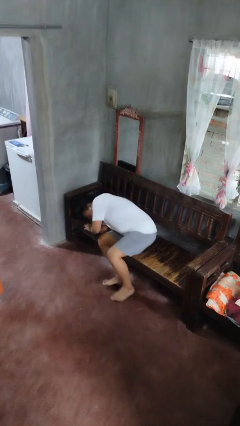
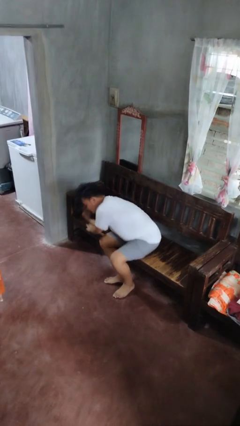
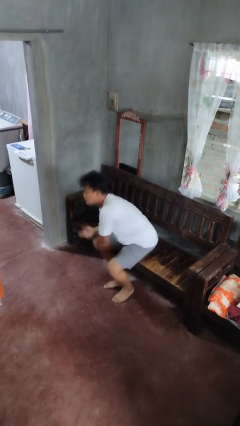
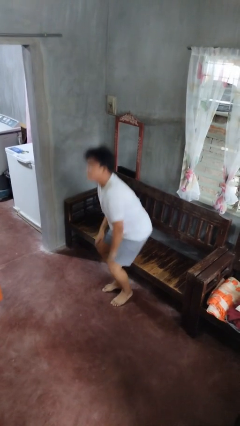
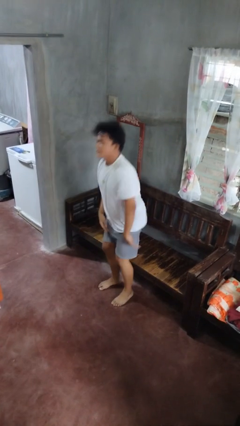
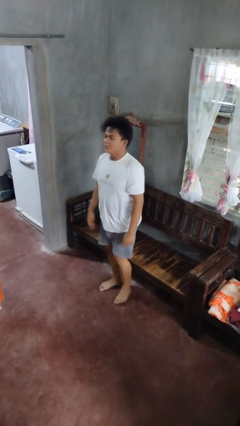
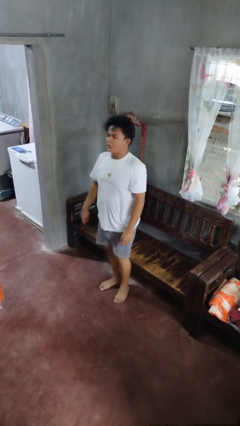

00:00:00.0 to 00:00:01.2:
person stands up

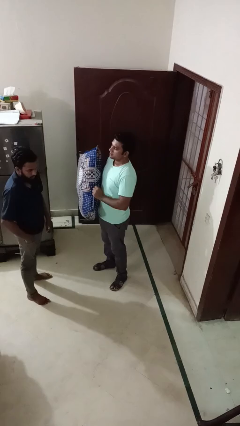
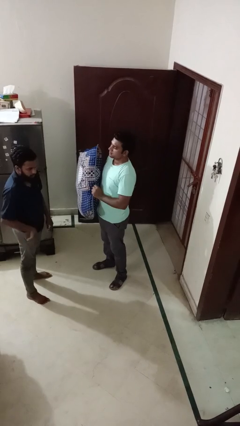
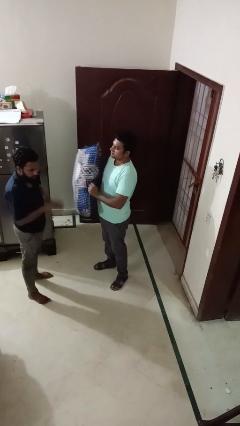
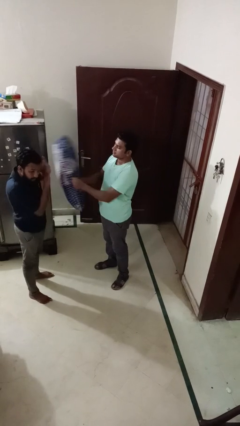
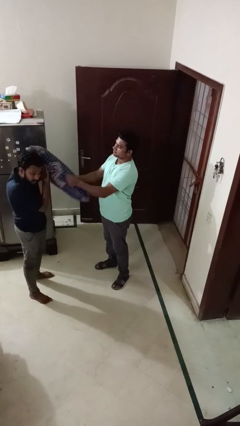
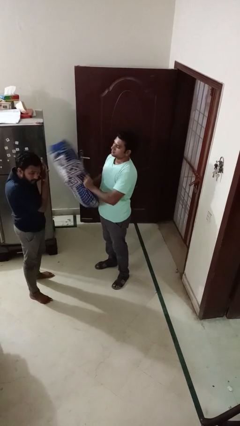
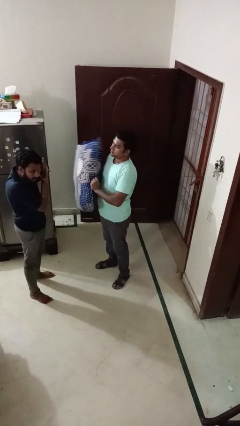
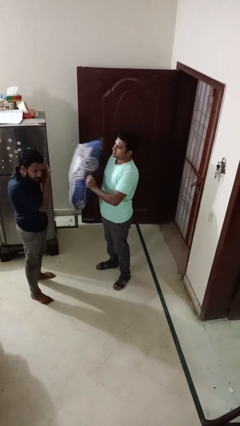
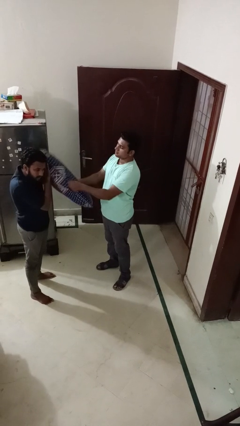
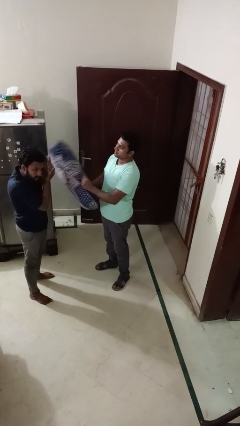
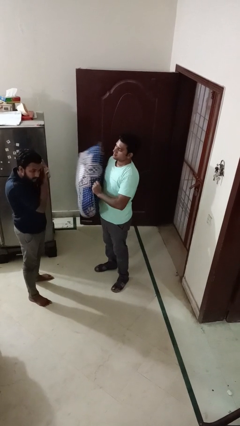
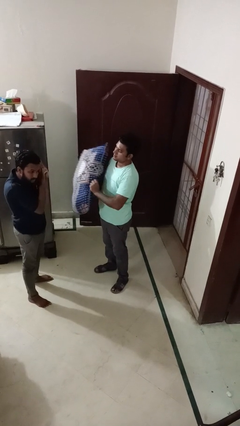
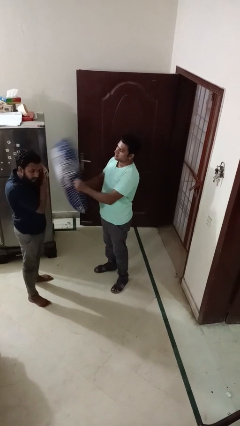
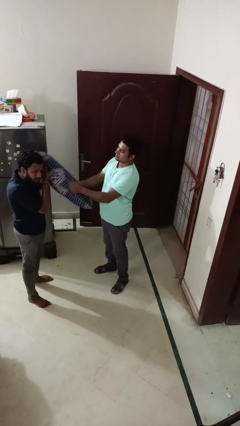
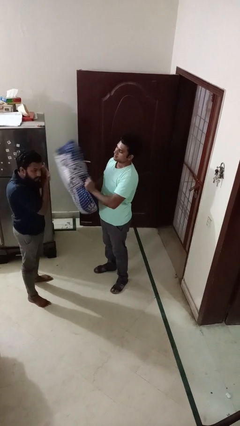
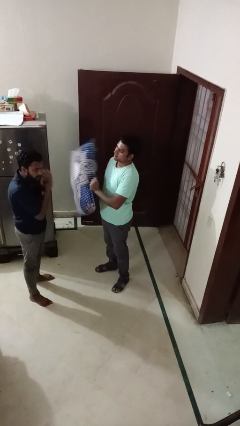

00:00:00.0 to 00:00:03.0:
person hits person with pillow

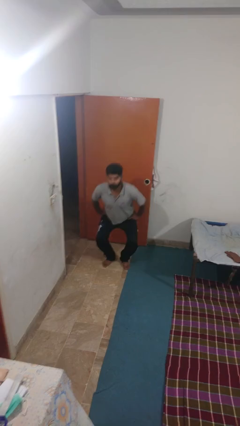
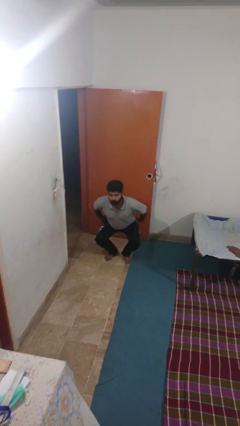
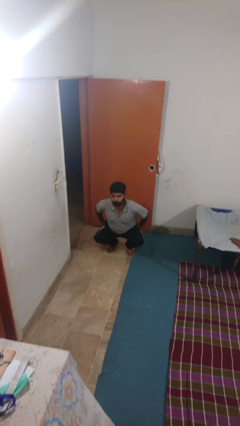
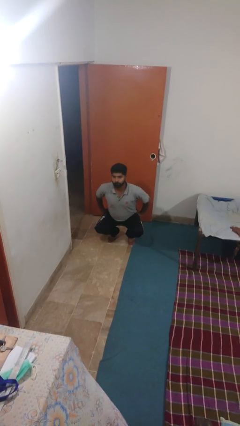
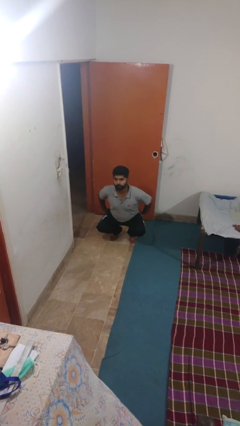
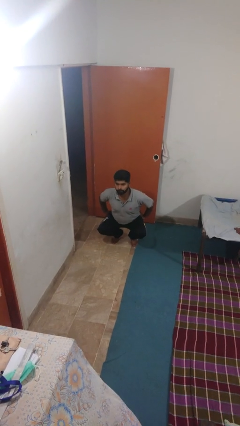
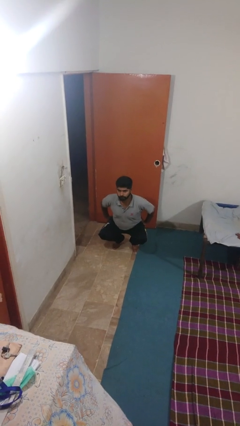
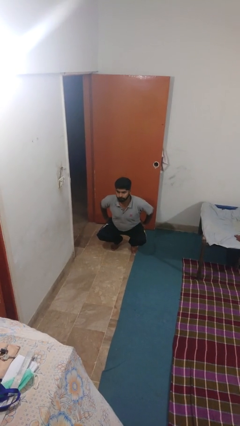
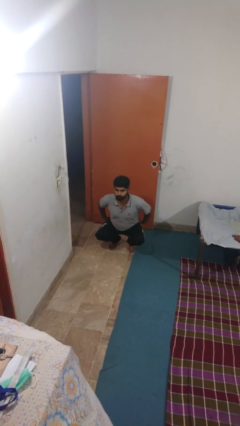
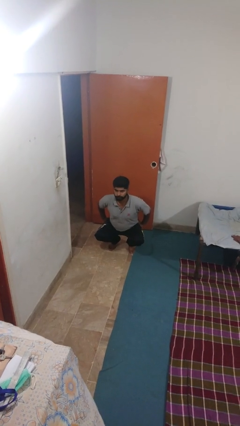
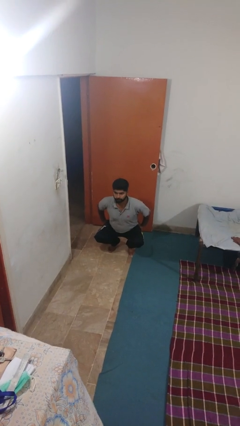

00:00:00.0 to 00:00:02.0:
person squats

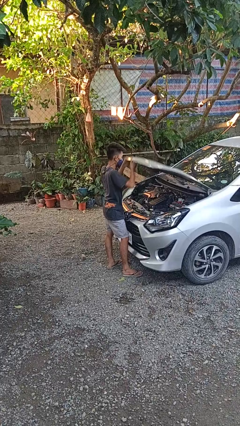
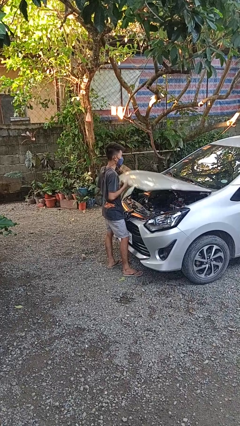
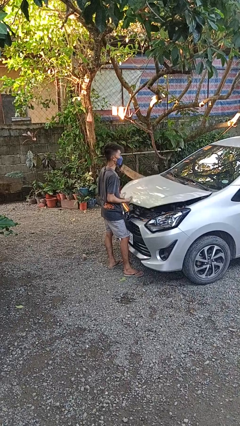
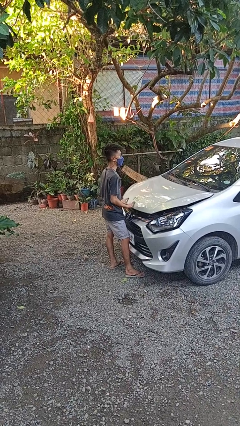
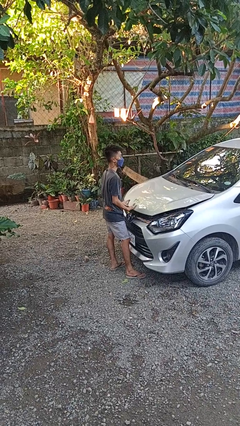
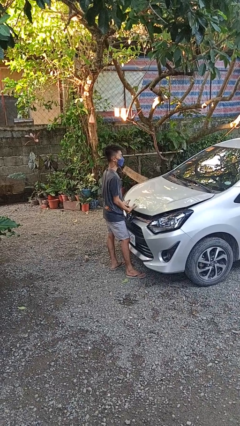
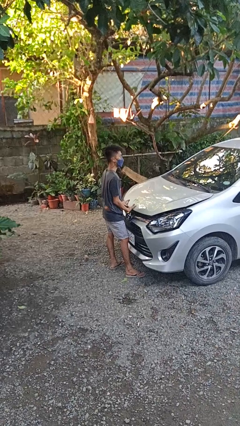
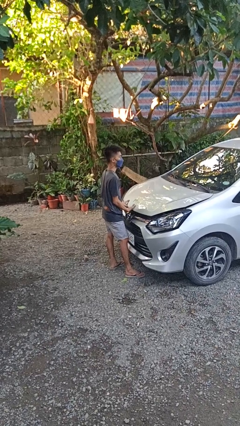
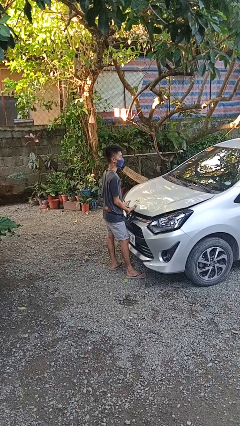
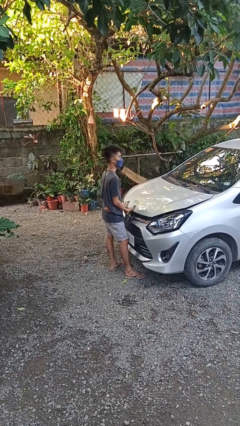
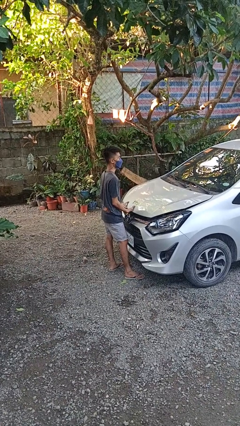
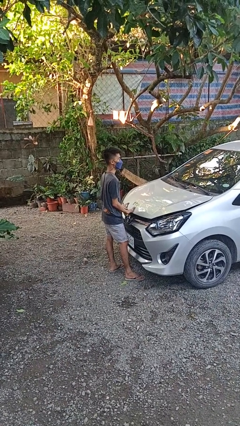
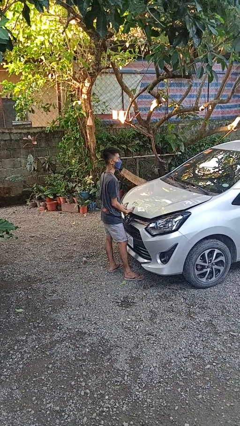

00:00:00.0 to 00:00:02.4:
person closes car hood

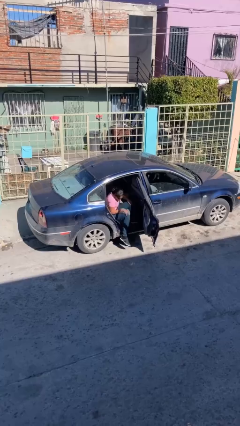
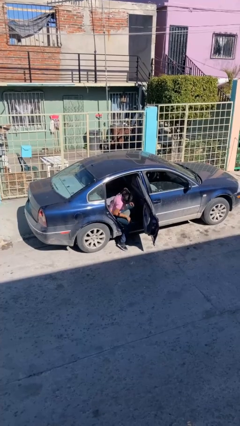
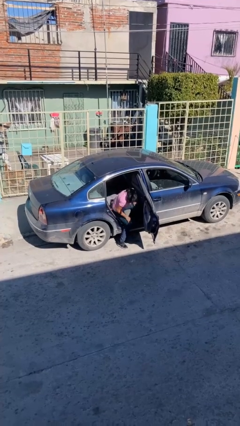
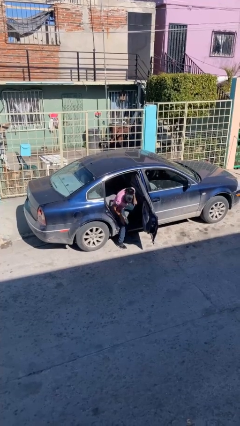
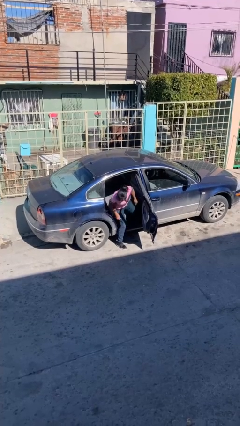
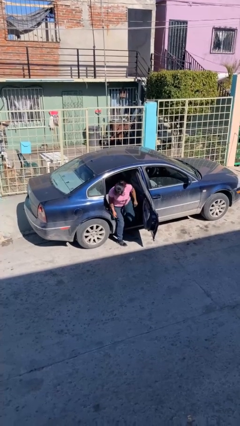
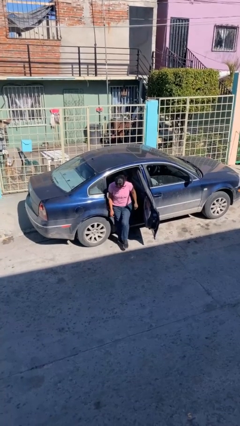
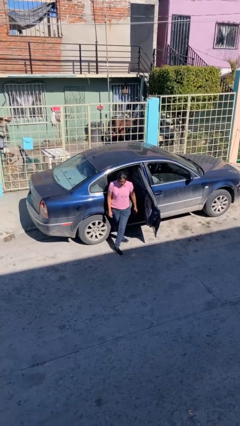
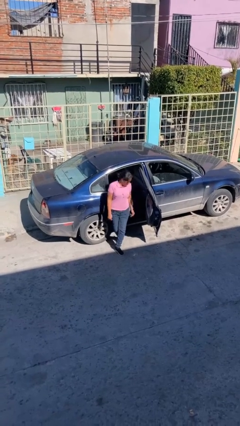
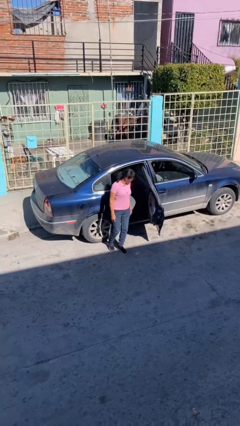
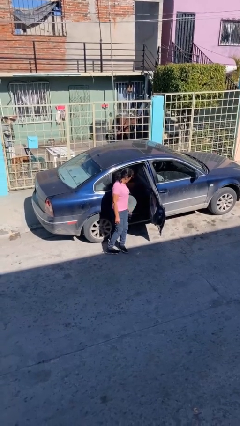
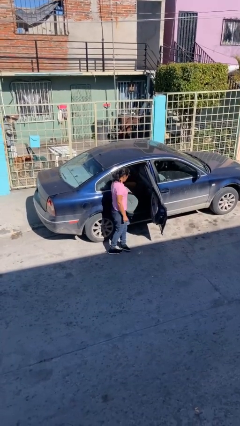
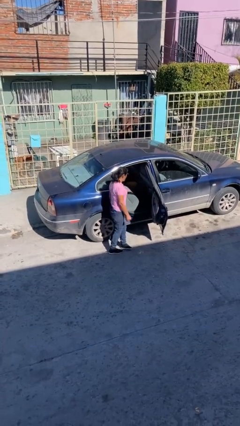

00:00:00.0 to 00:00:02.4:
person exits car

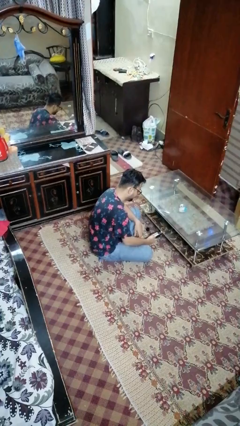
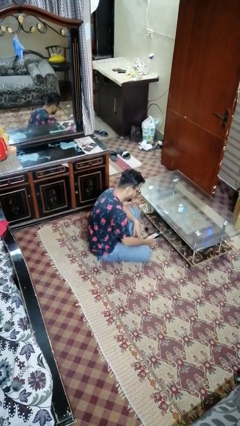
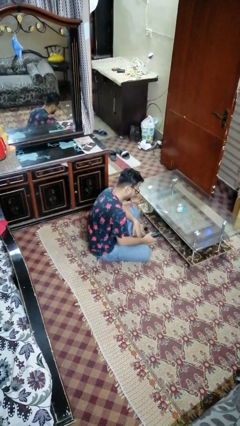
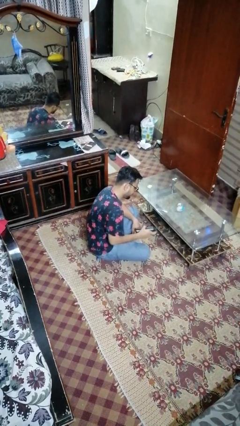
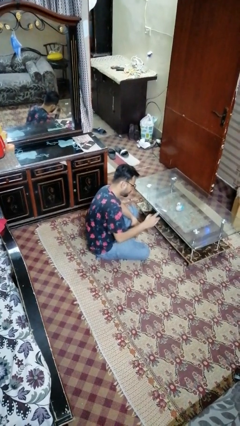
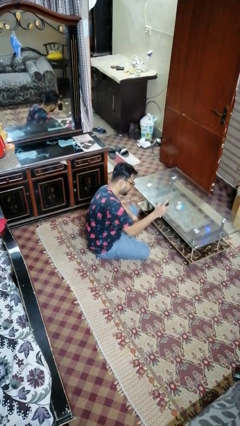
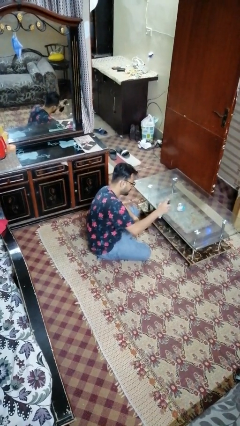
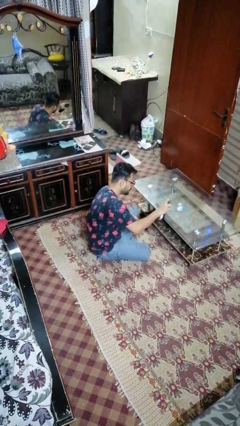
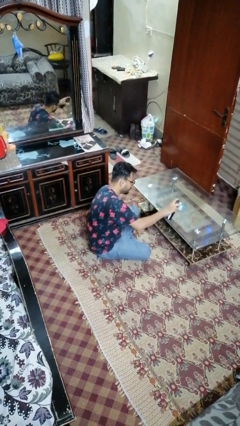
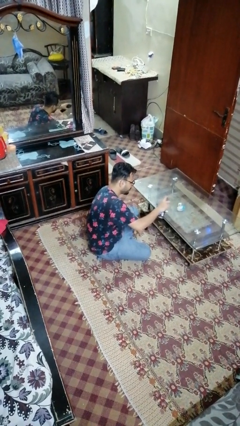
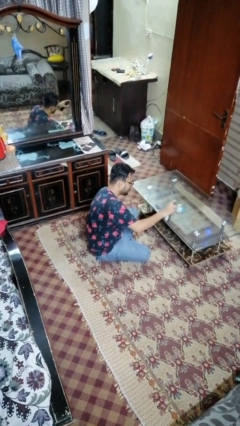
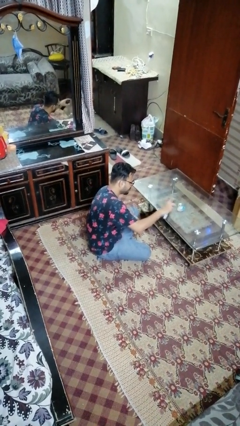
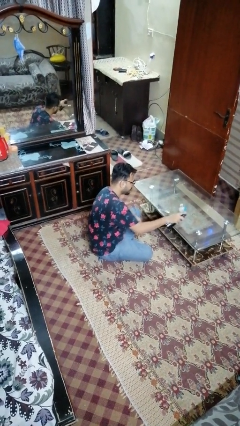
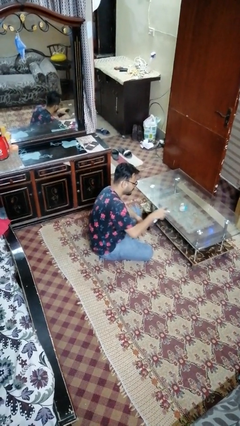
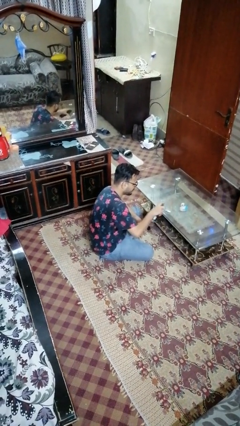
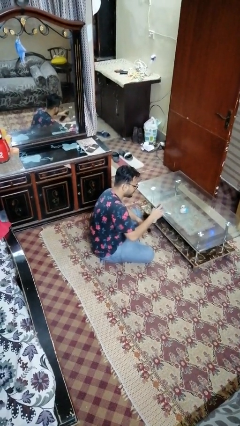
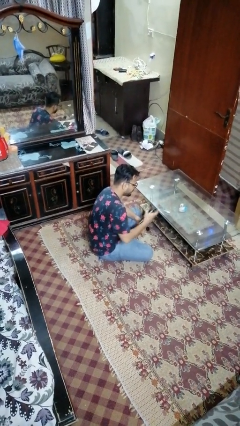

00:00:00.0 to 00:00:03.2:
person sprays from bottle

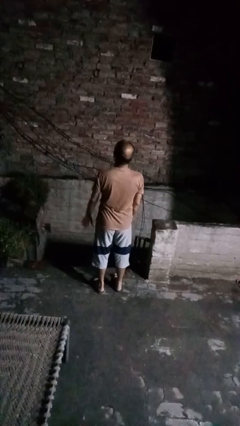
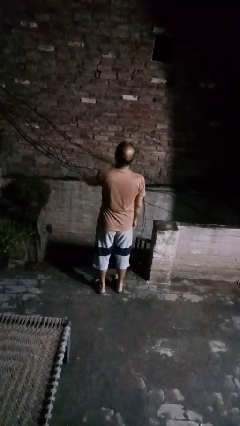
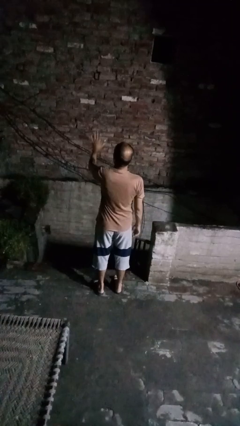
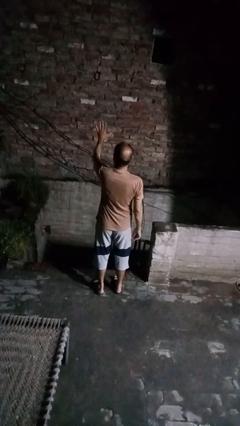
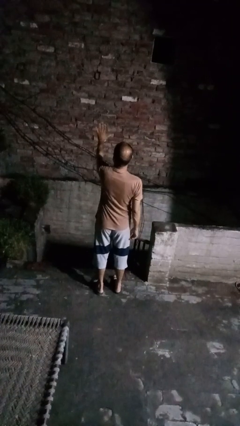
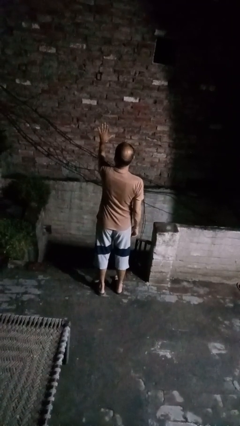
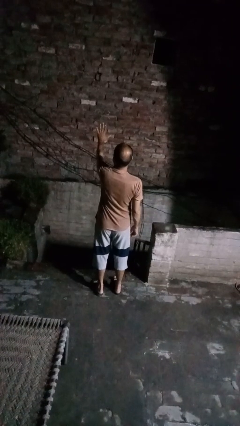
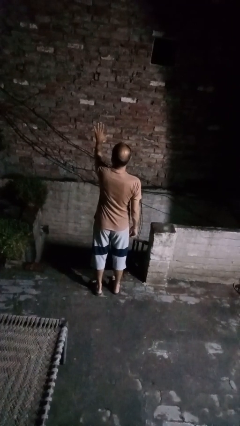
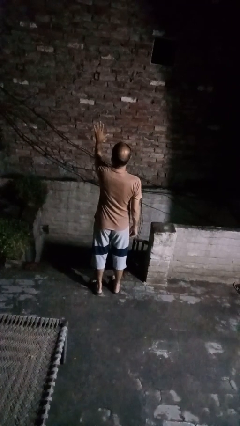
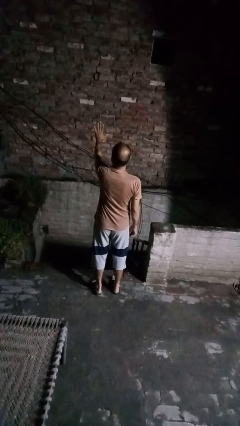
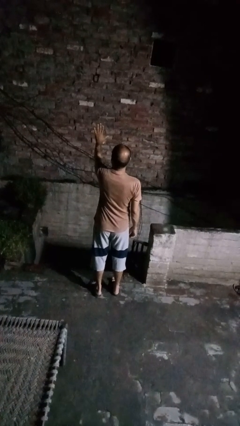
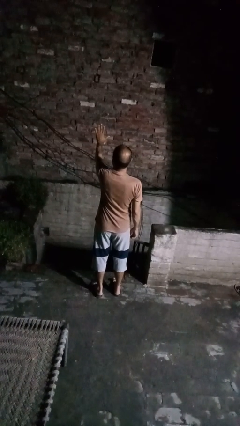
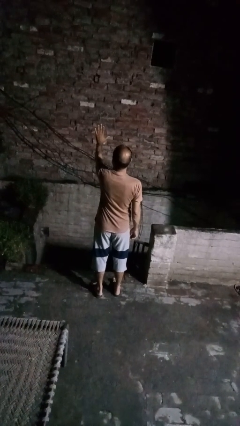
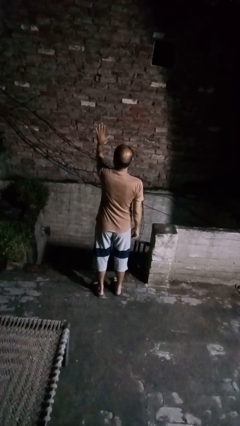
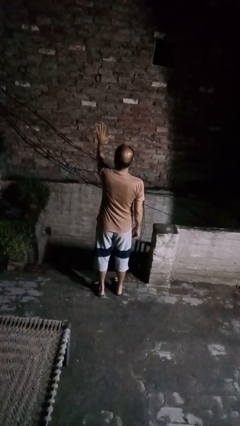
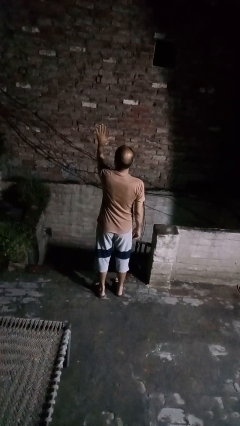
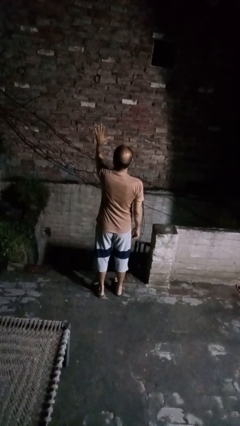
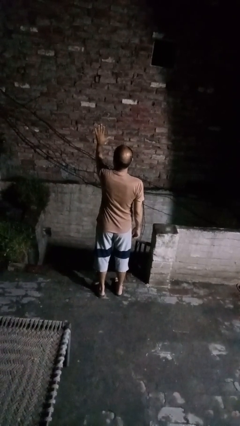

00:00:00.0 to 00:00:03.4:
person gestures stop
